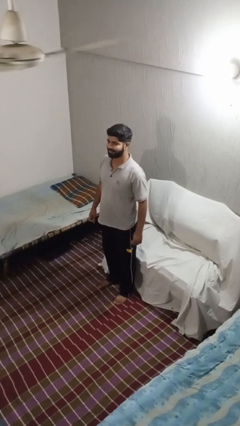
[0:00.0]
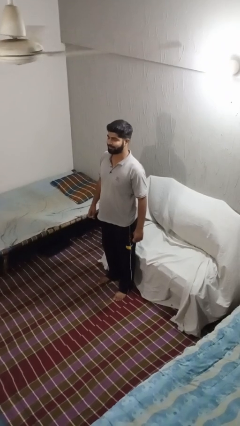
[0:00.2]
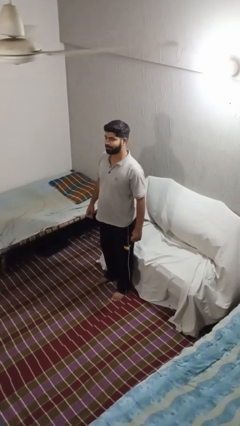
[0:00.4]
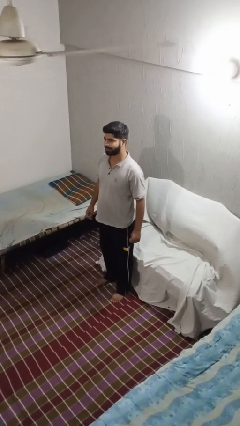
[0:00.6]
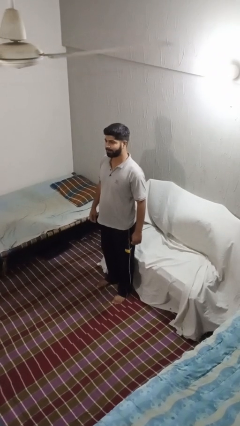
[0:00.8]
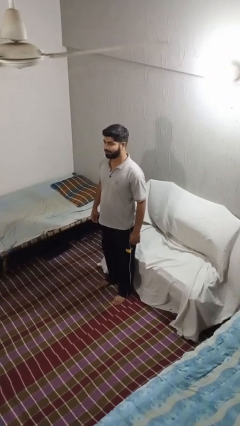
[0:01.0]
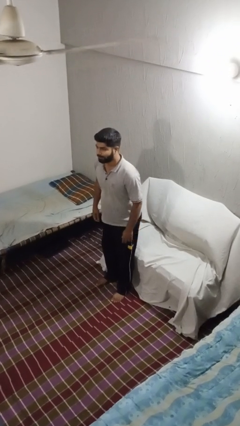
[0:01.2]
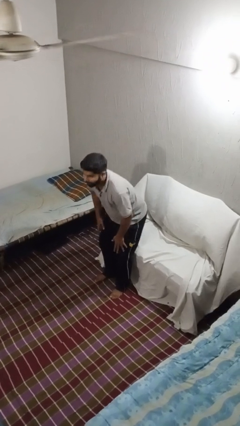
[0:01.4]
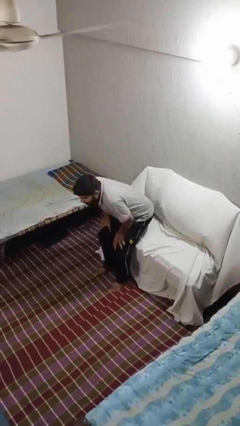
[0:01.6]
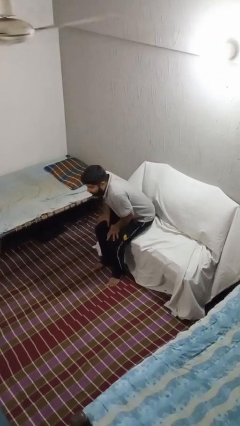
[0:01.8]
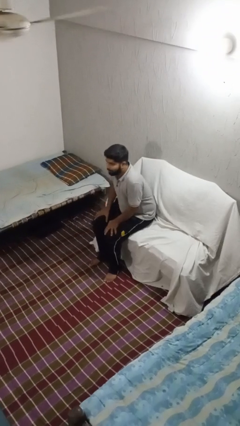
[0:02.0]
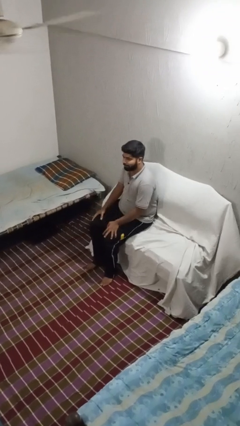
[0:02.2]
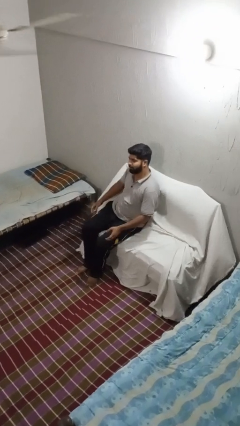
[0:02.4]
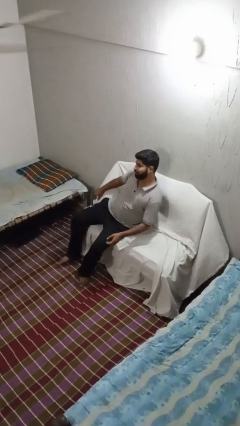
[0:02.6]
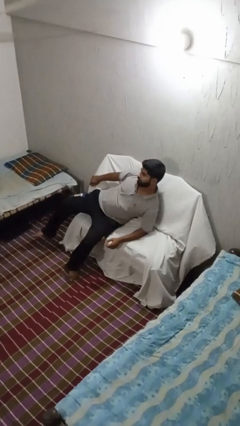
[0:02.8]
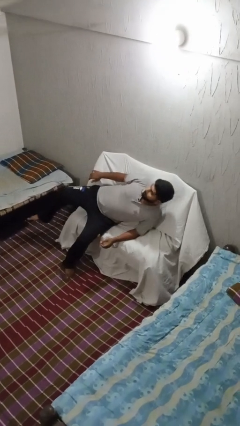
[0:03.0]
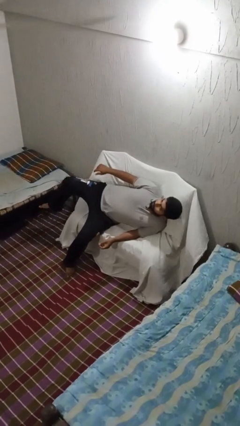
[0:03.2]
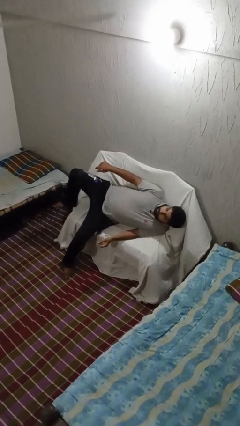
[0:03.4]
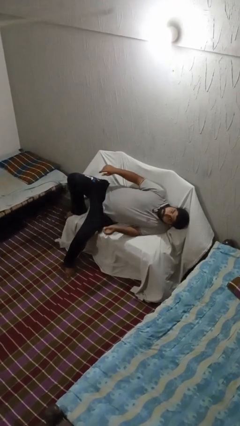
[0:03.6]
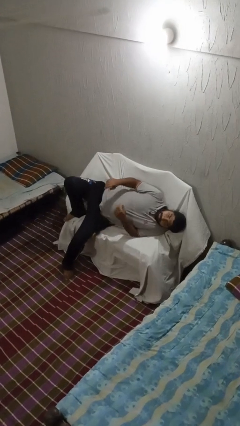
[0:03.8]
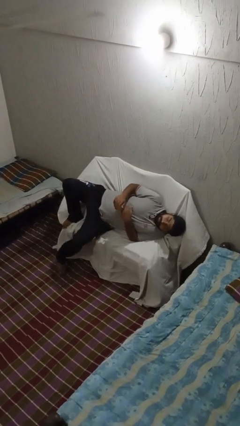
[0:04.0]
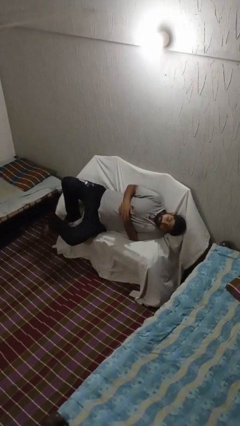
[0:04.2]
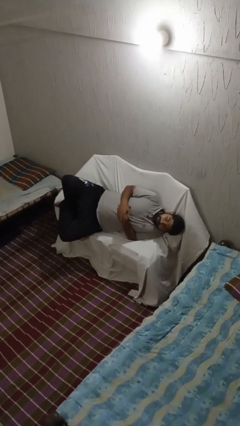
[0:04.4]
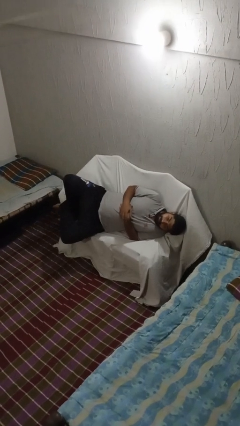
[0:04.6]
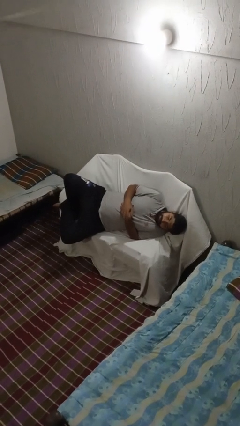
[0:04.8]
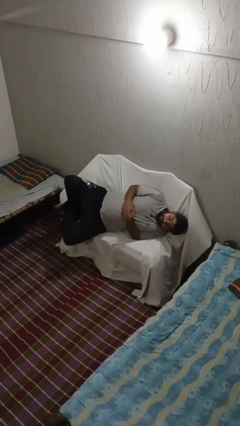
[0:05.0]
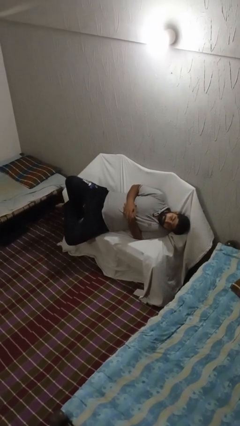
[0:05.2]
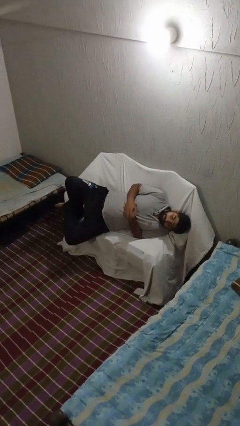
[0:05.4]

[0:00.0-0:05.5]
person lies down on couch

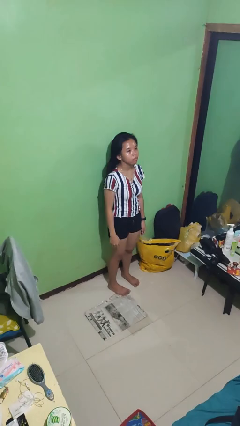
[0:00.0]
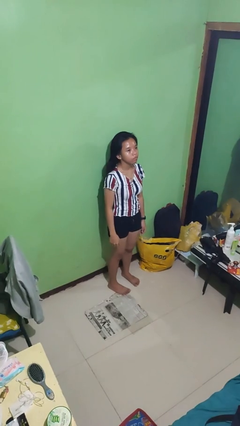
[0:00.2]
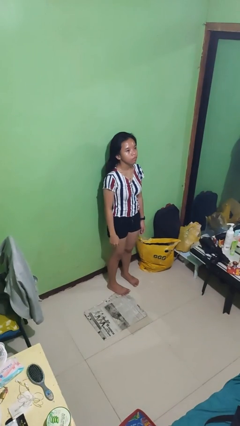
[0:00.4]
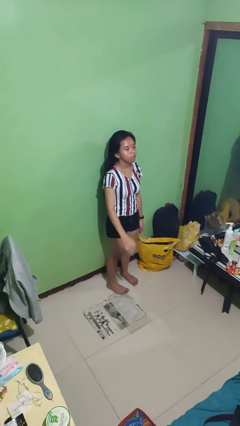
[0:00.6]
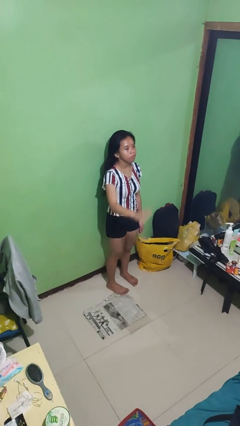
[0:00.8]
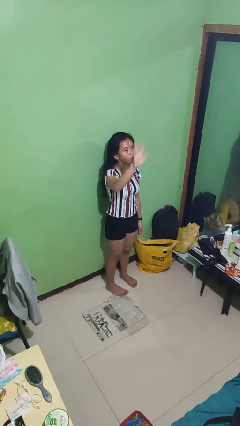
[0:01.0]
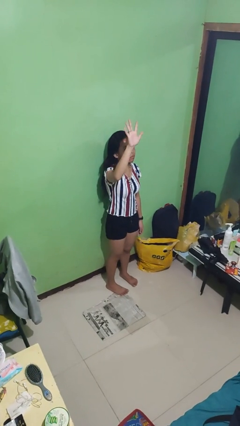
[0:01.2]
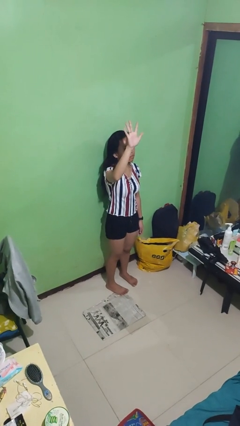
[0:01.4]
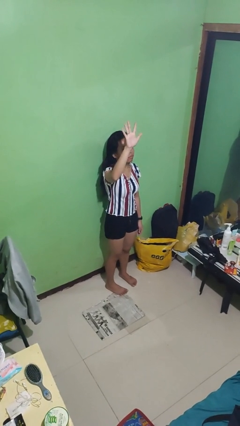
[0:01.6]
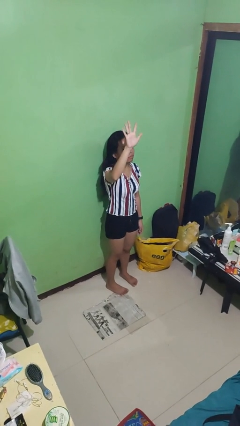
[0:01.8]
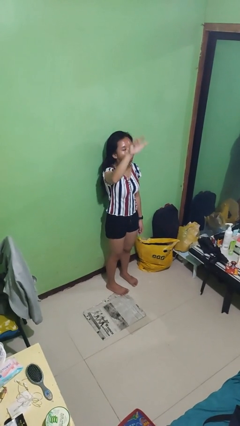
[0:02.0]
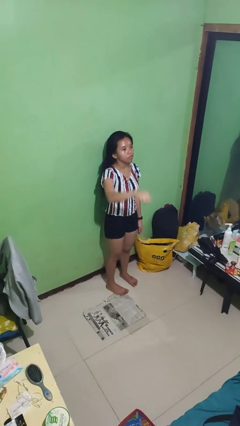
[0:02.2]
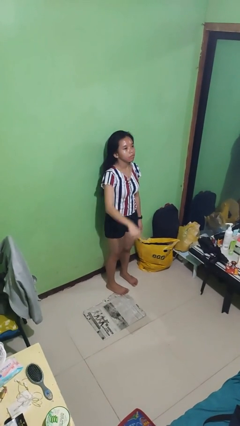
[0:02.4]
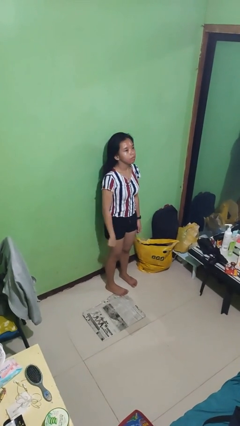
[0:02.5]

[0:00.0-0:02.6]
person gestures number five

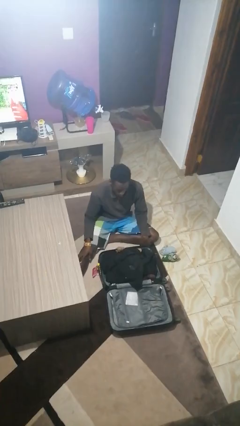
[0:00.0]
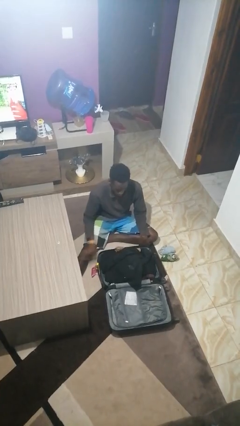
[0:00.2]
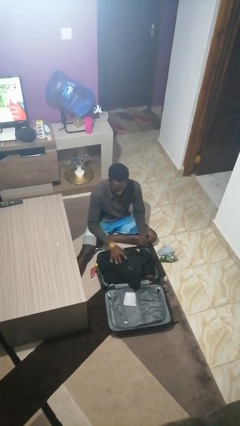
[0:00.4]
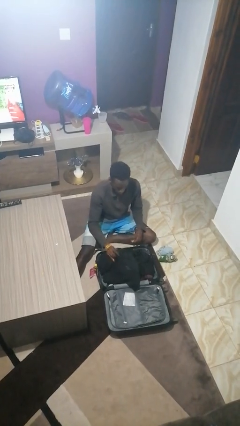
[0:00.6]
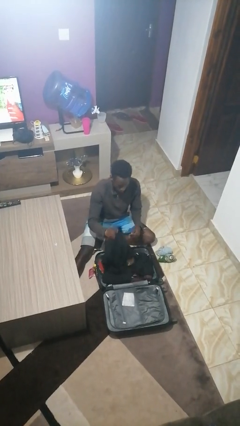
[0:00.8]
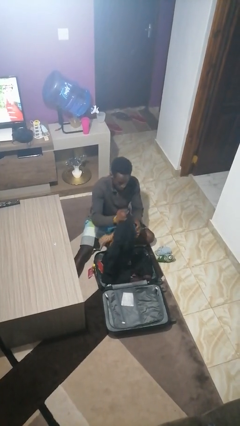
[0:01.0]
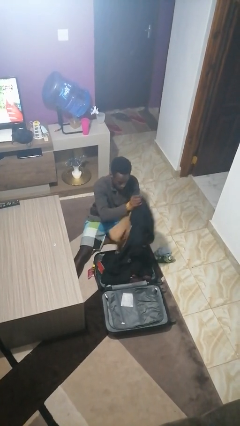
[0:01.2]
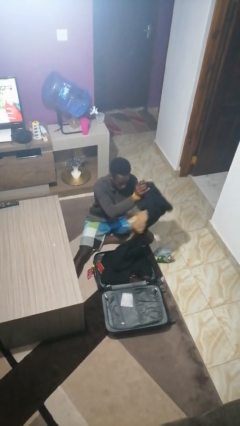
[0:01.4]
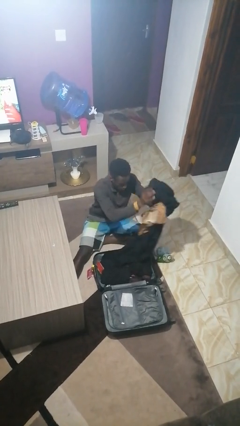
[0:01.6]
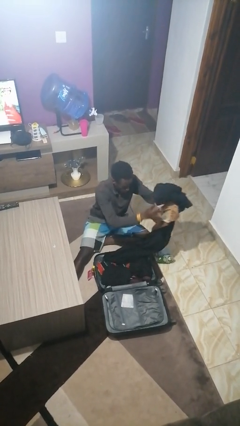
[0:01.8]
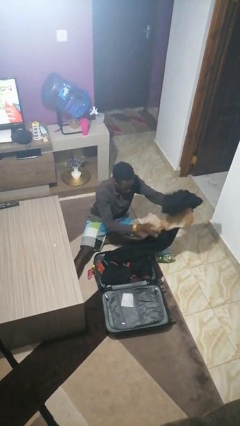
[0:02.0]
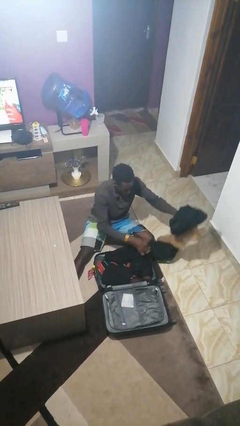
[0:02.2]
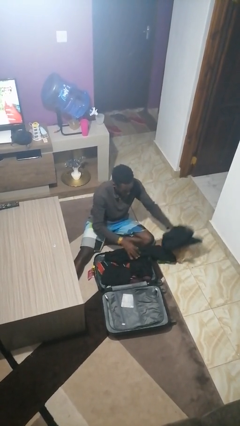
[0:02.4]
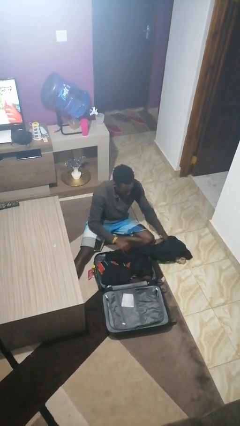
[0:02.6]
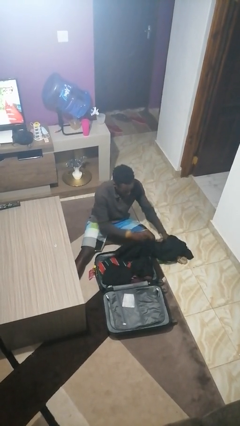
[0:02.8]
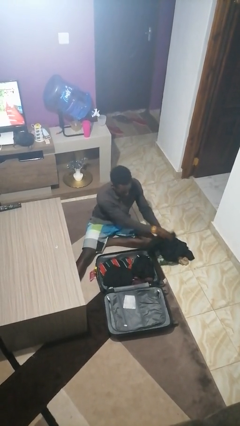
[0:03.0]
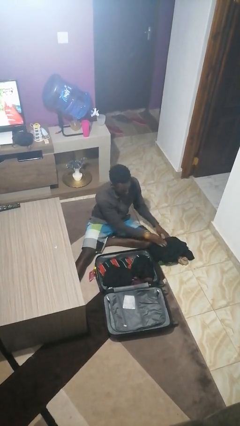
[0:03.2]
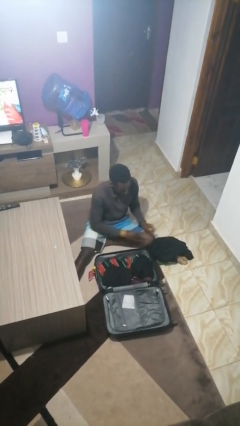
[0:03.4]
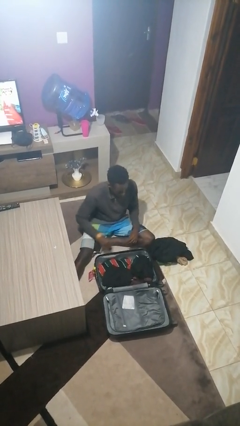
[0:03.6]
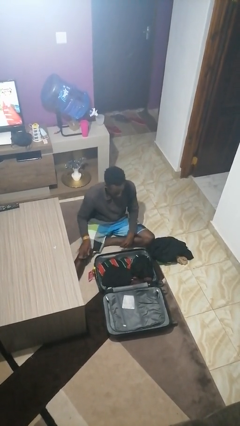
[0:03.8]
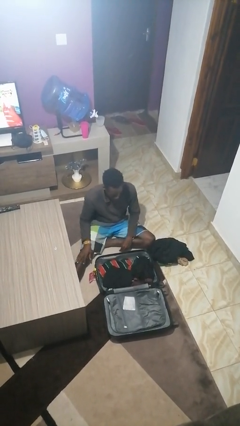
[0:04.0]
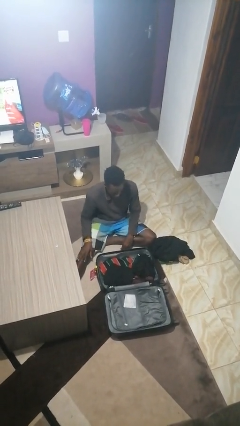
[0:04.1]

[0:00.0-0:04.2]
person unloads clothes from suitcase

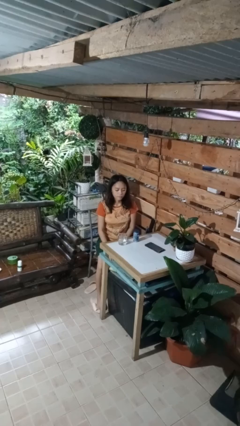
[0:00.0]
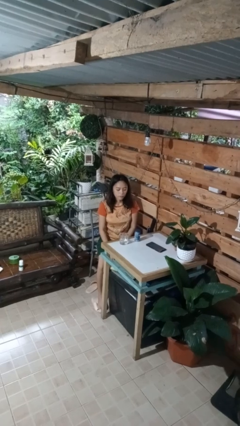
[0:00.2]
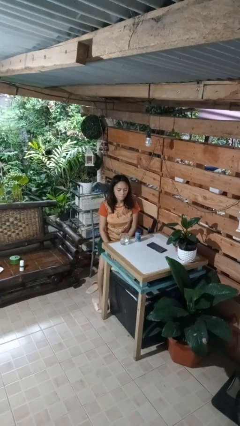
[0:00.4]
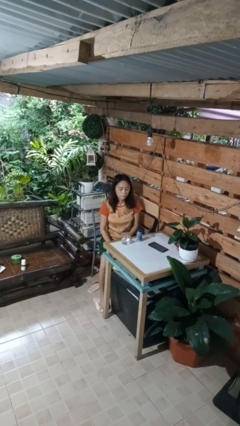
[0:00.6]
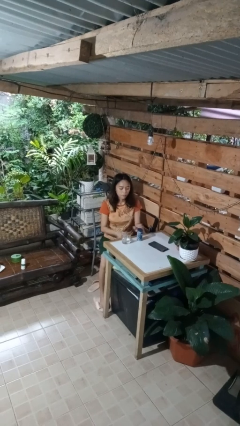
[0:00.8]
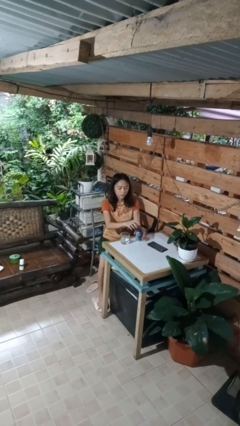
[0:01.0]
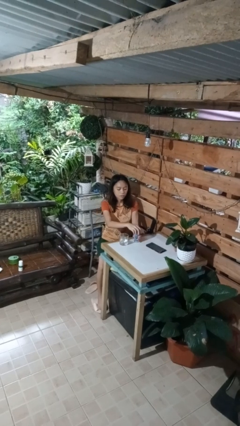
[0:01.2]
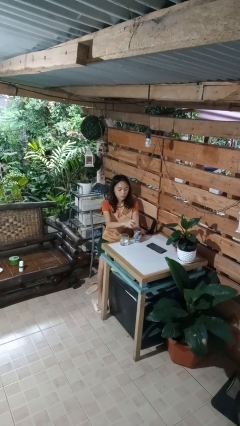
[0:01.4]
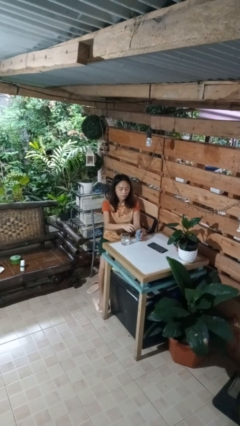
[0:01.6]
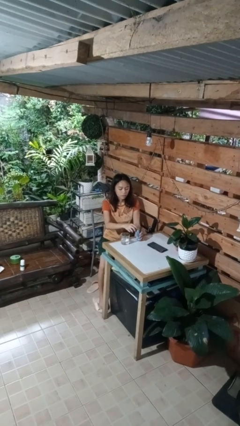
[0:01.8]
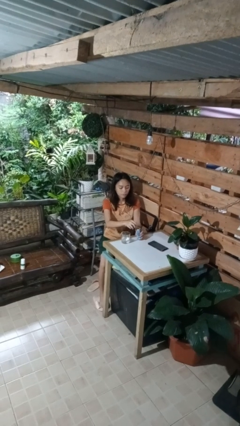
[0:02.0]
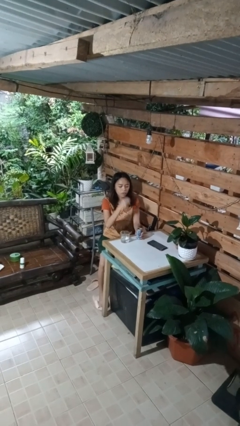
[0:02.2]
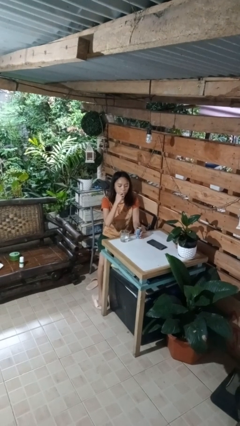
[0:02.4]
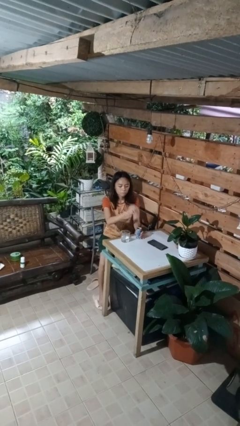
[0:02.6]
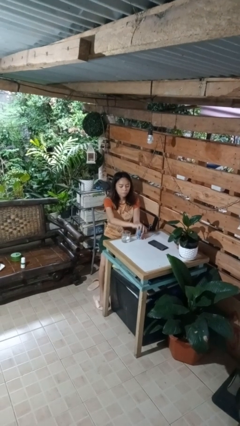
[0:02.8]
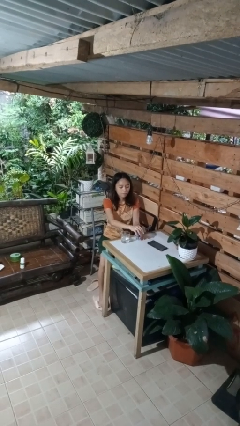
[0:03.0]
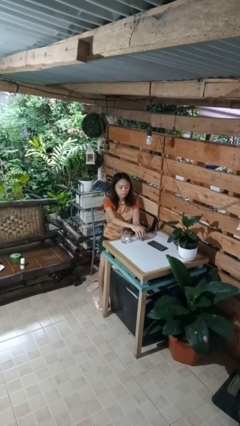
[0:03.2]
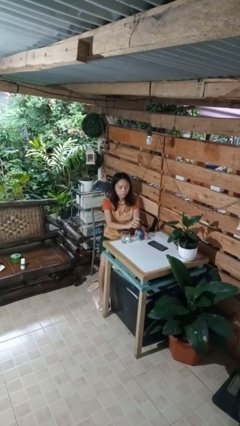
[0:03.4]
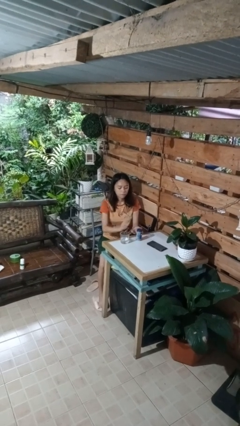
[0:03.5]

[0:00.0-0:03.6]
person takes medicine pills

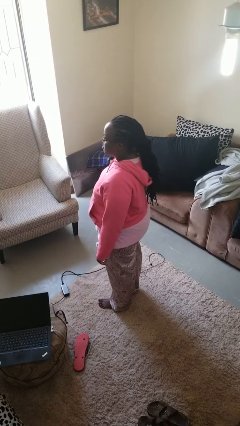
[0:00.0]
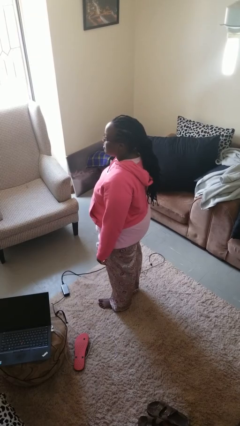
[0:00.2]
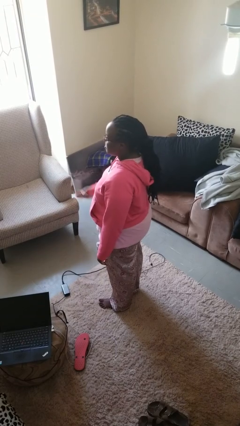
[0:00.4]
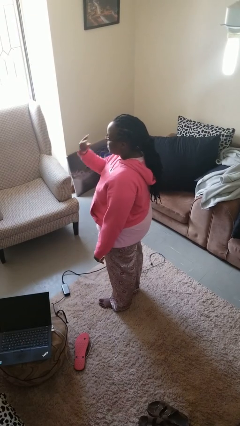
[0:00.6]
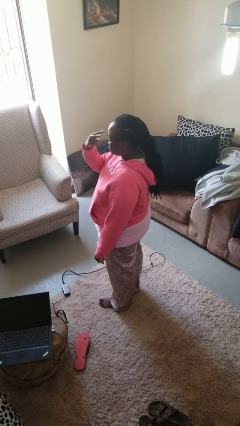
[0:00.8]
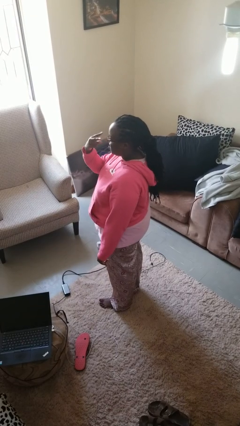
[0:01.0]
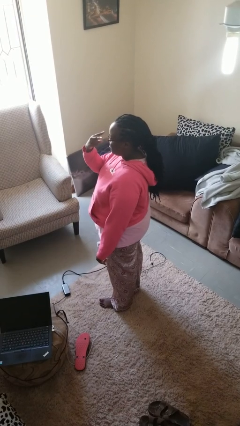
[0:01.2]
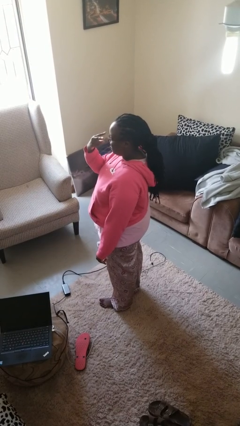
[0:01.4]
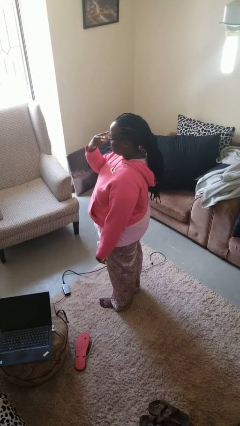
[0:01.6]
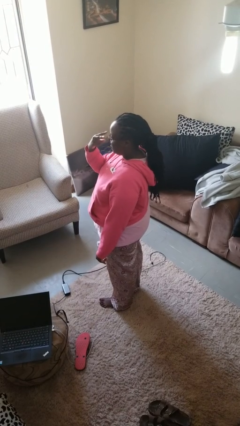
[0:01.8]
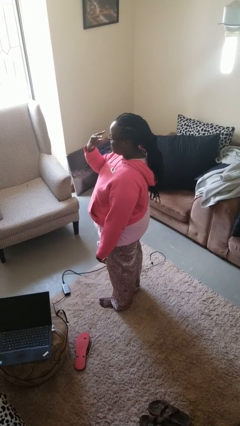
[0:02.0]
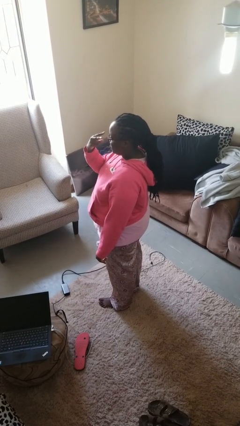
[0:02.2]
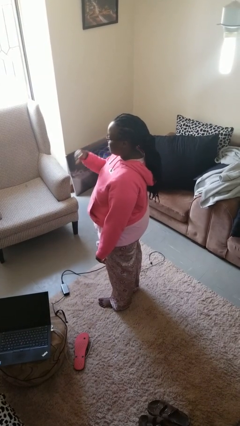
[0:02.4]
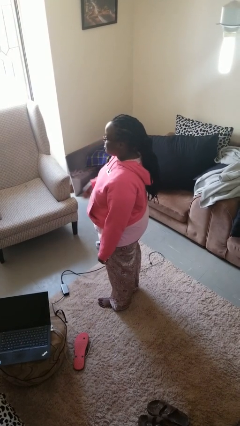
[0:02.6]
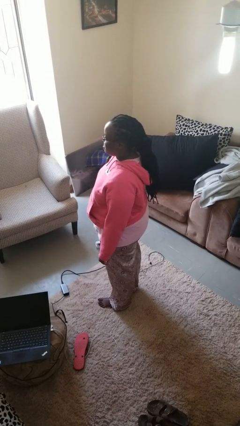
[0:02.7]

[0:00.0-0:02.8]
person gestures watch closely
